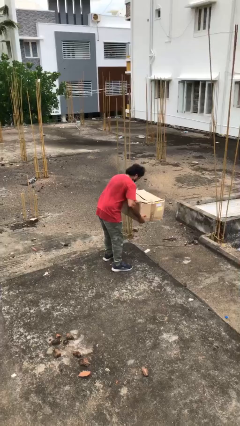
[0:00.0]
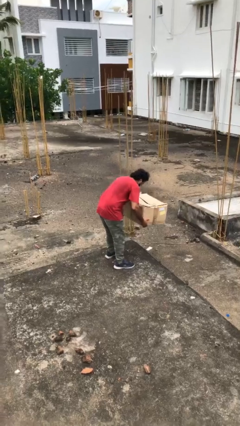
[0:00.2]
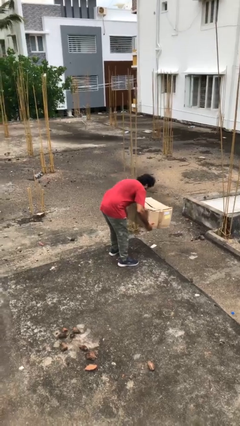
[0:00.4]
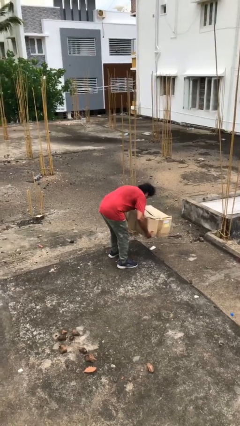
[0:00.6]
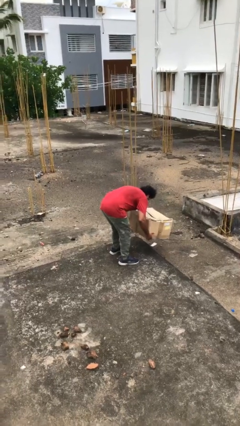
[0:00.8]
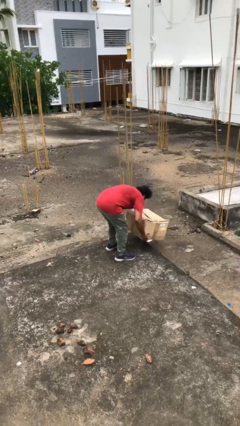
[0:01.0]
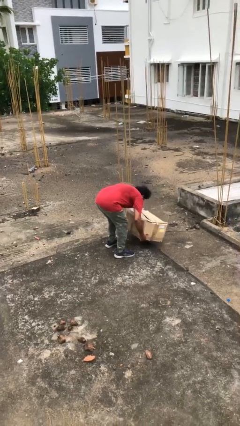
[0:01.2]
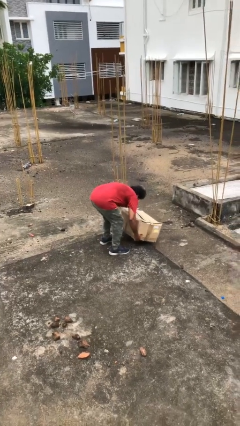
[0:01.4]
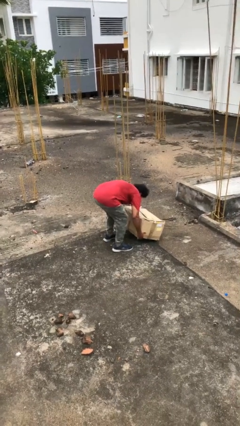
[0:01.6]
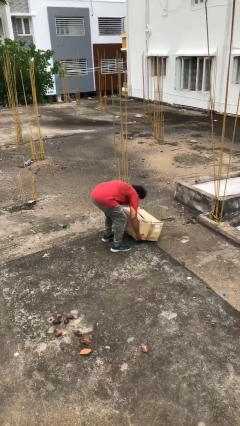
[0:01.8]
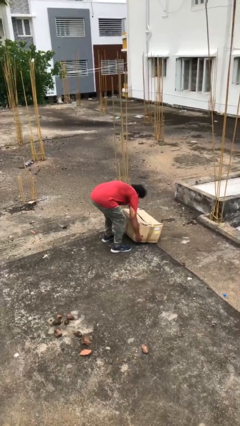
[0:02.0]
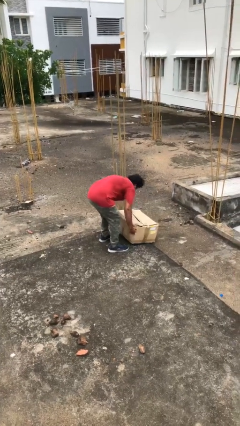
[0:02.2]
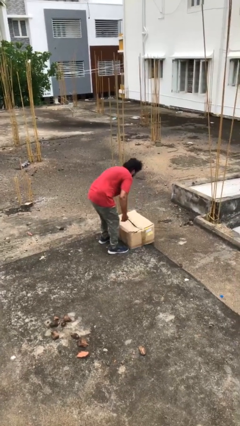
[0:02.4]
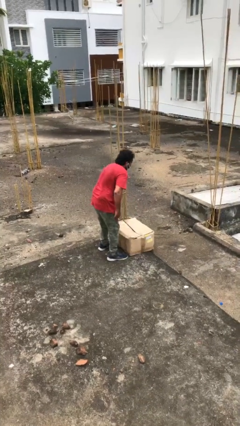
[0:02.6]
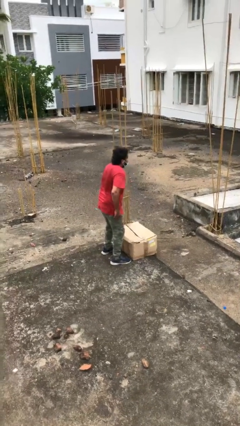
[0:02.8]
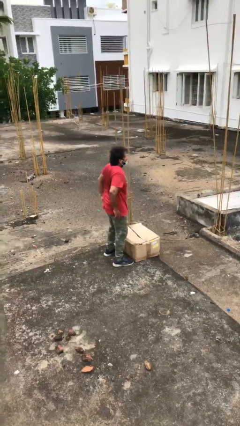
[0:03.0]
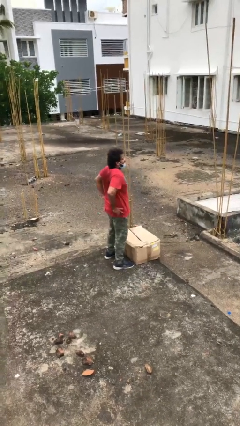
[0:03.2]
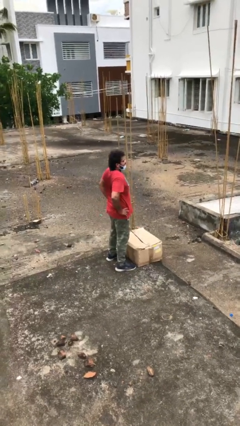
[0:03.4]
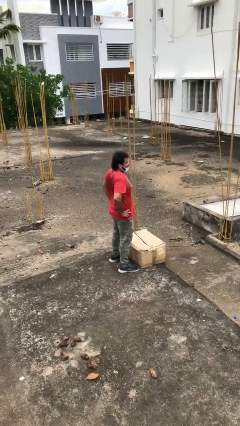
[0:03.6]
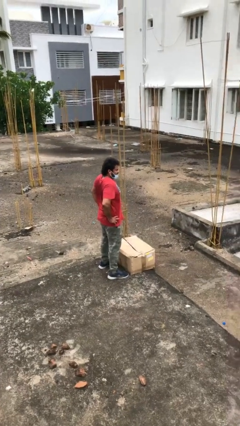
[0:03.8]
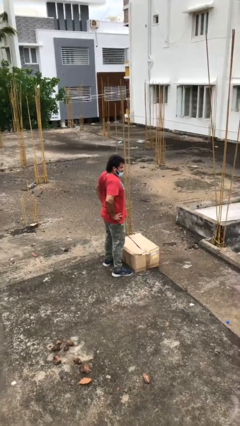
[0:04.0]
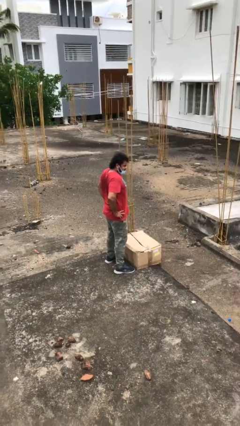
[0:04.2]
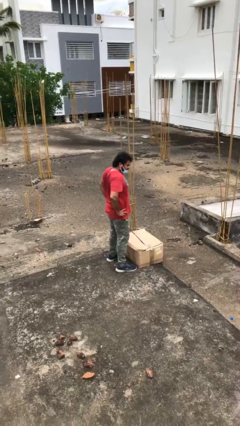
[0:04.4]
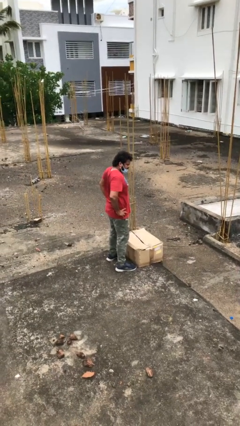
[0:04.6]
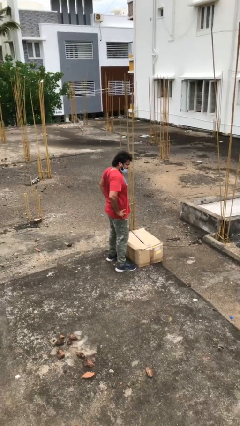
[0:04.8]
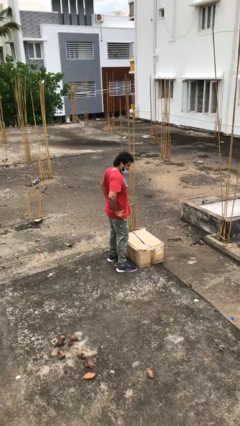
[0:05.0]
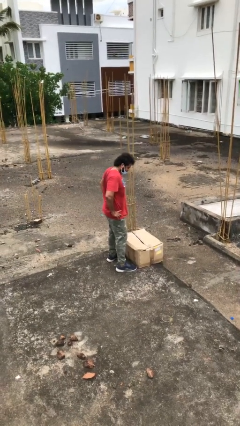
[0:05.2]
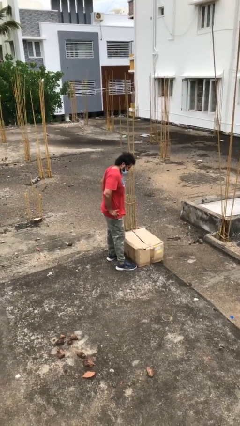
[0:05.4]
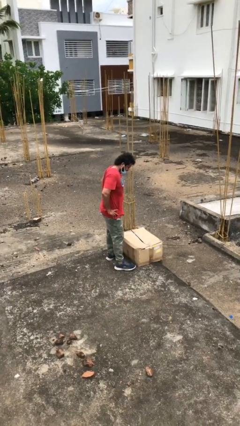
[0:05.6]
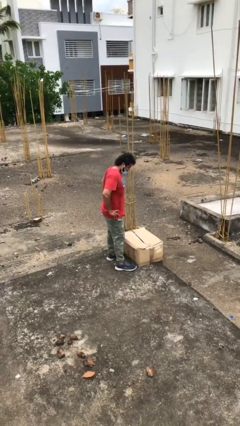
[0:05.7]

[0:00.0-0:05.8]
person puts down object on floor

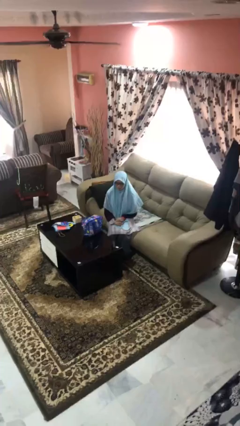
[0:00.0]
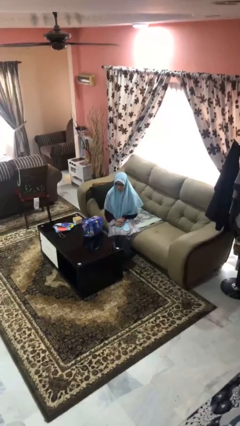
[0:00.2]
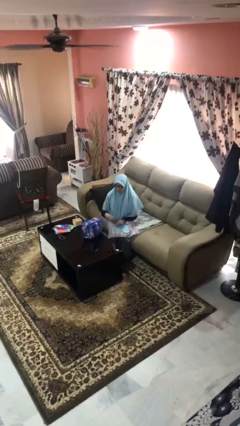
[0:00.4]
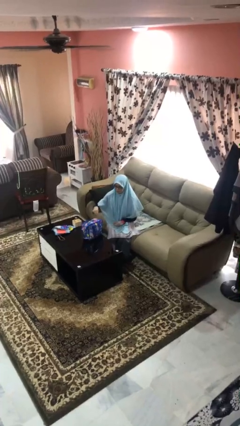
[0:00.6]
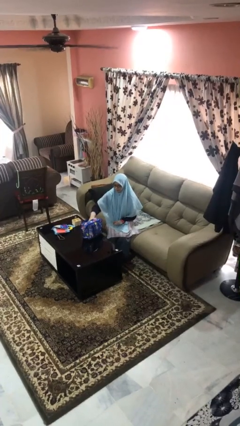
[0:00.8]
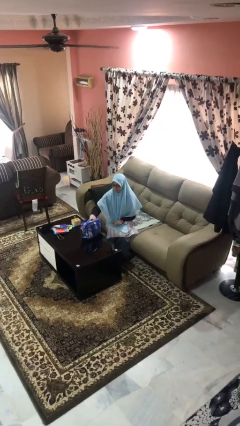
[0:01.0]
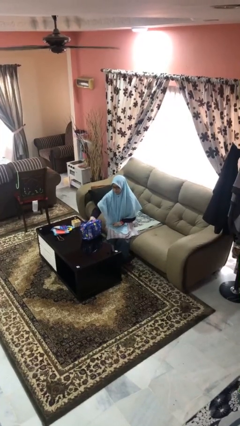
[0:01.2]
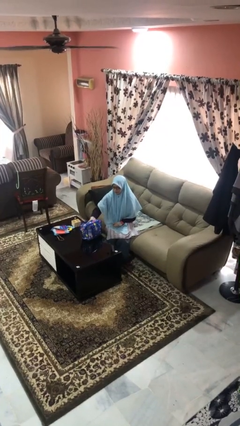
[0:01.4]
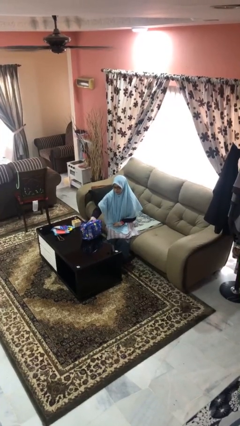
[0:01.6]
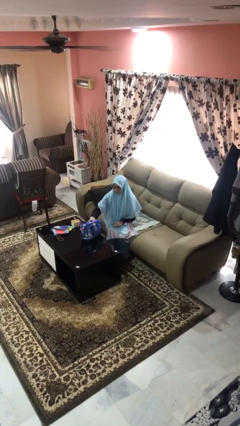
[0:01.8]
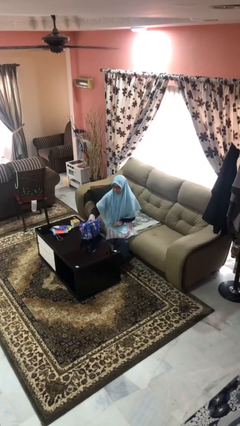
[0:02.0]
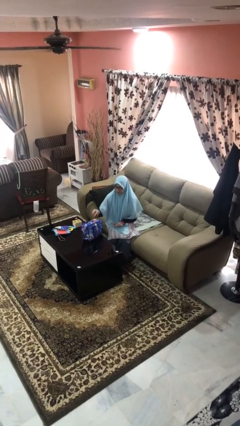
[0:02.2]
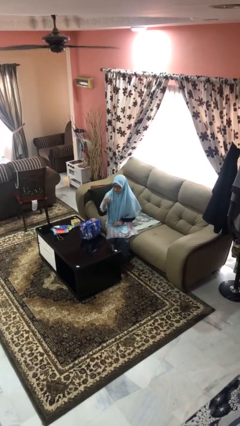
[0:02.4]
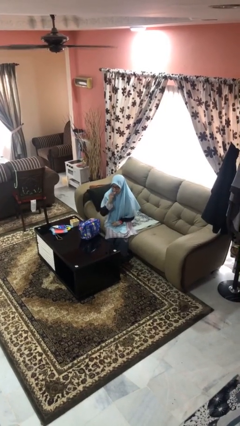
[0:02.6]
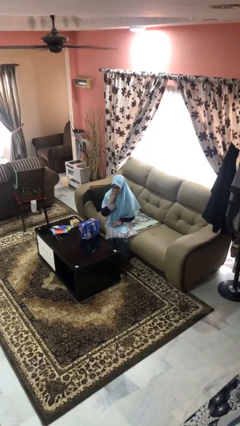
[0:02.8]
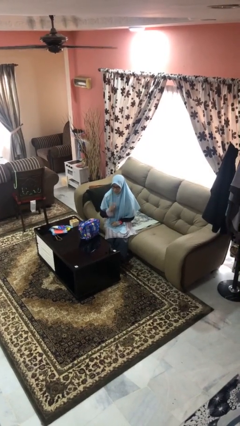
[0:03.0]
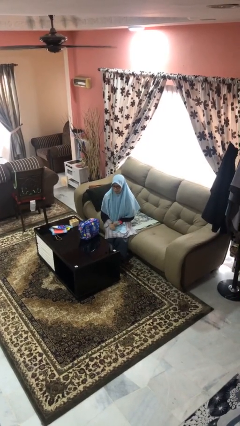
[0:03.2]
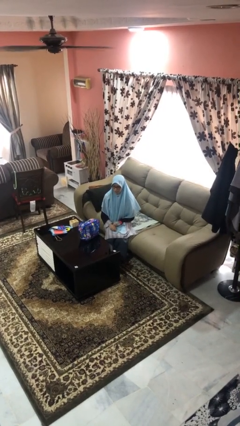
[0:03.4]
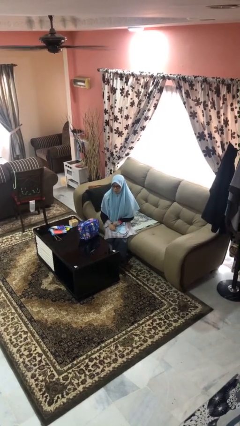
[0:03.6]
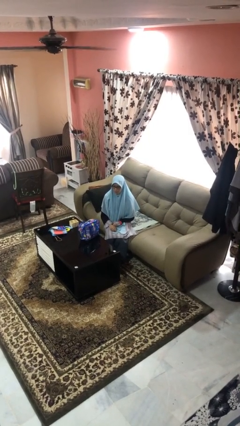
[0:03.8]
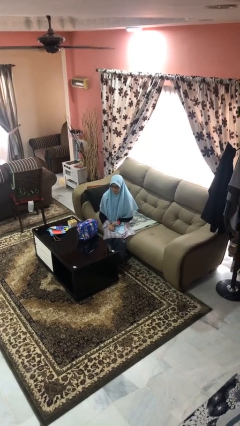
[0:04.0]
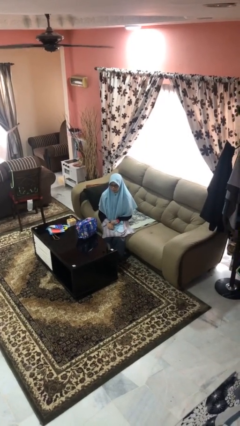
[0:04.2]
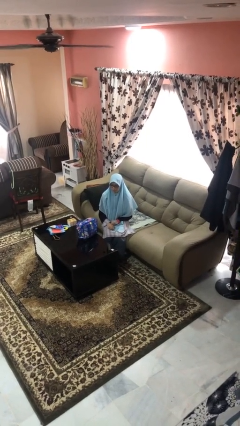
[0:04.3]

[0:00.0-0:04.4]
person eats snack from bag

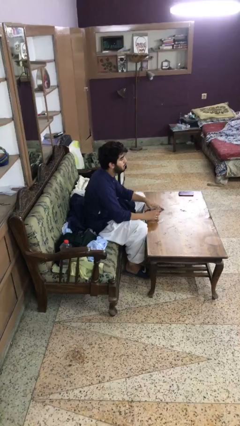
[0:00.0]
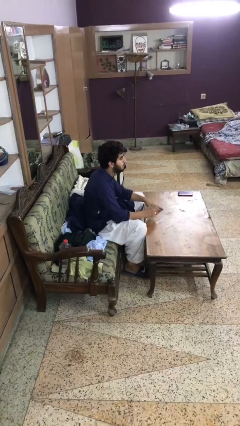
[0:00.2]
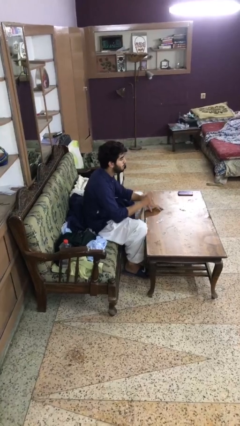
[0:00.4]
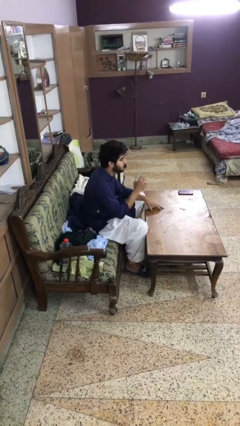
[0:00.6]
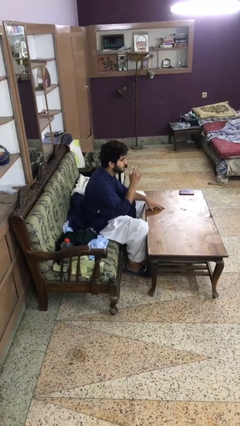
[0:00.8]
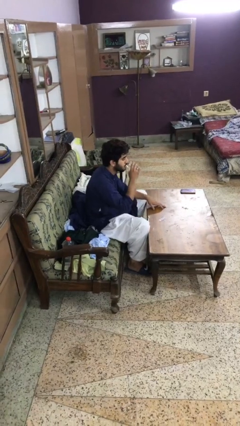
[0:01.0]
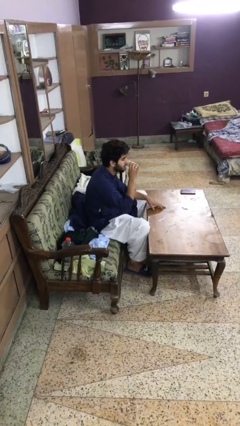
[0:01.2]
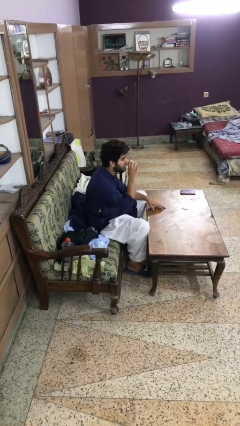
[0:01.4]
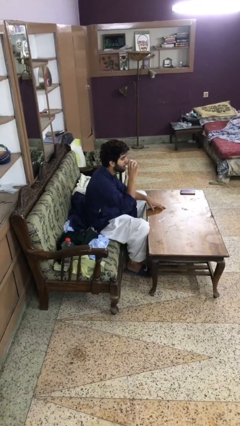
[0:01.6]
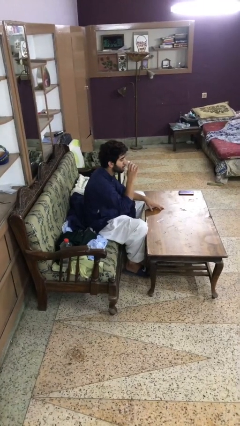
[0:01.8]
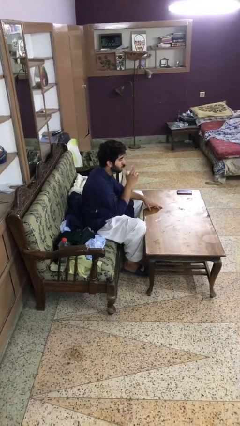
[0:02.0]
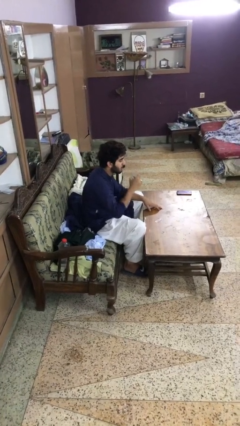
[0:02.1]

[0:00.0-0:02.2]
person drinks from cup

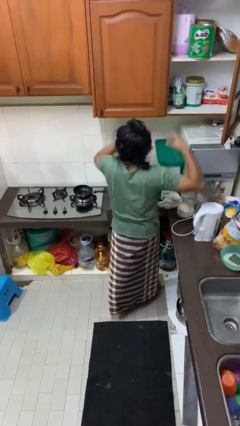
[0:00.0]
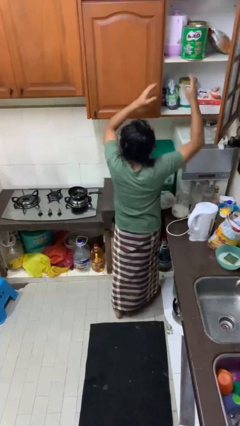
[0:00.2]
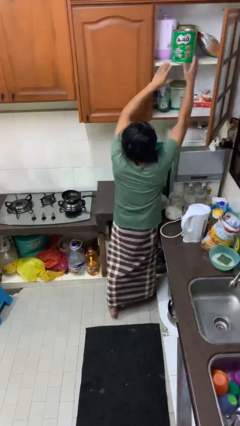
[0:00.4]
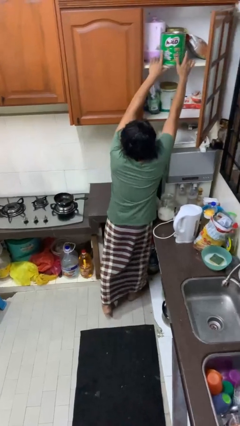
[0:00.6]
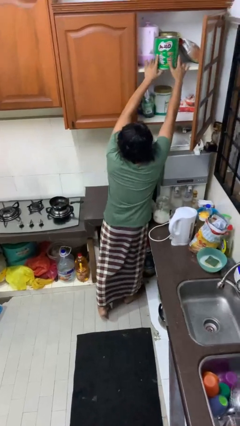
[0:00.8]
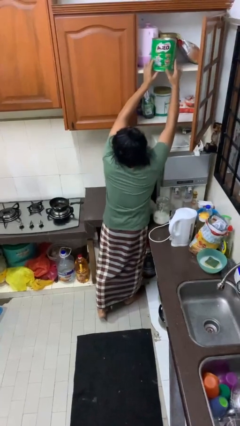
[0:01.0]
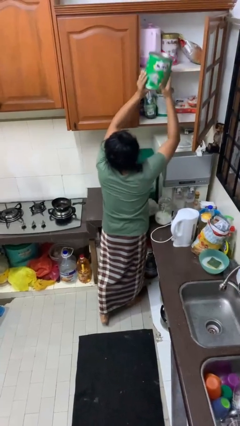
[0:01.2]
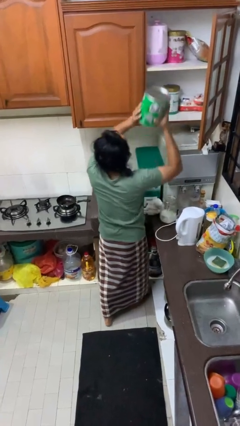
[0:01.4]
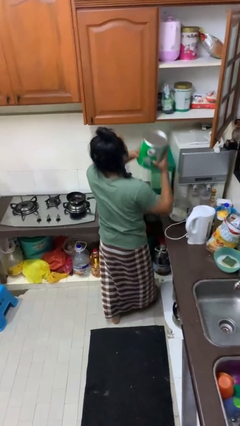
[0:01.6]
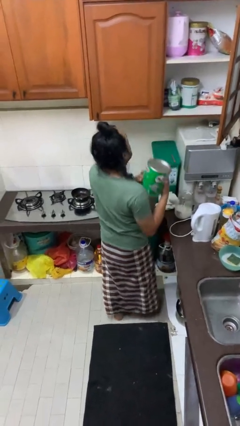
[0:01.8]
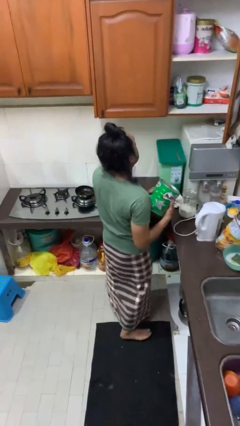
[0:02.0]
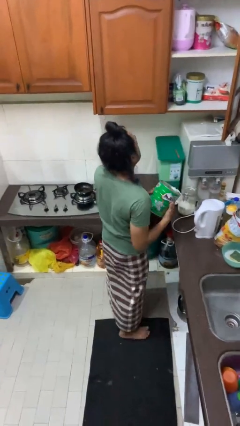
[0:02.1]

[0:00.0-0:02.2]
person takes object from cabinet

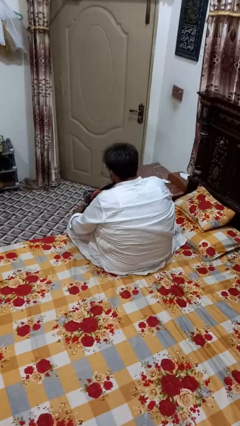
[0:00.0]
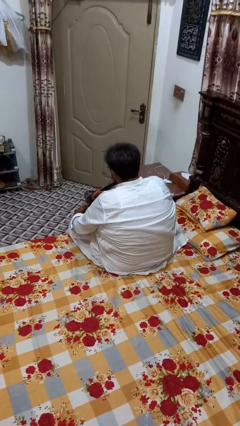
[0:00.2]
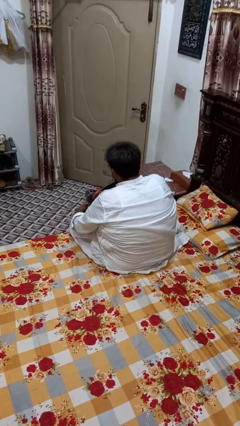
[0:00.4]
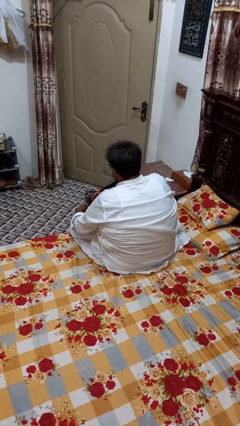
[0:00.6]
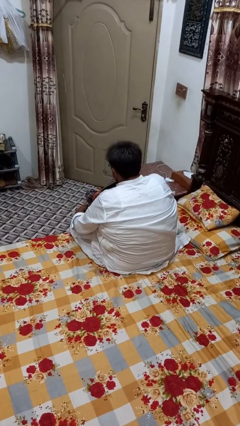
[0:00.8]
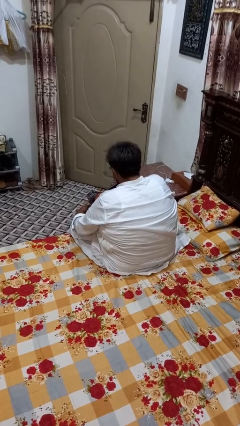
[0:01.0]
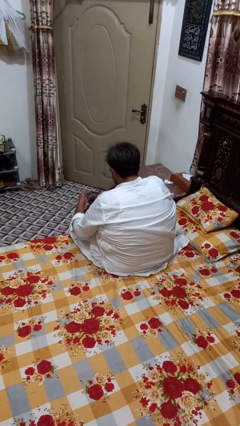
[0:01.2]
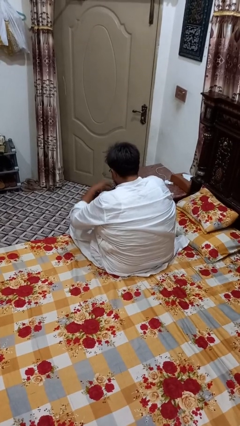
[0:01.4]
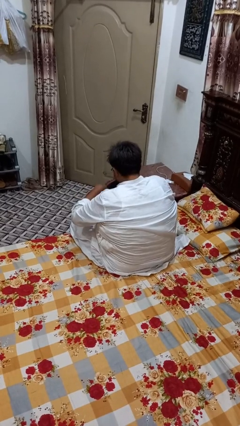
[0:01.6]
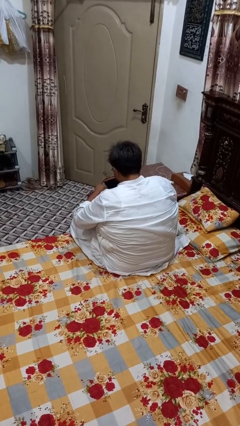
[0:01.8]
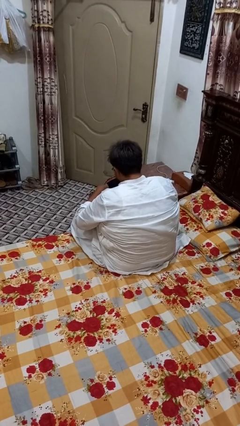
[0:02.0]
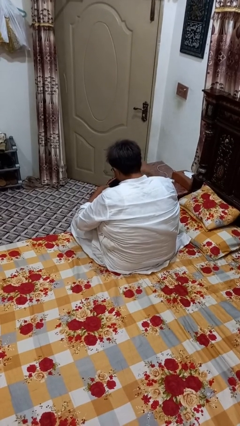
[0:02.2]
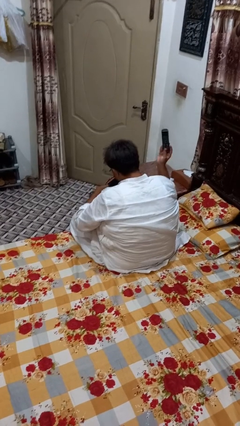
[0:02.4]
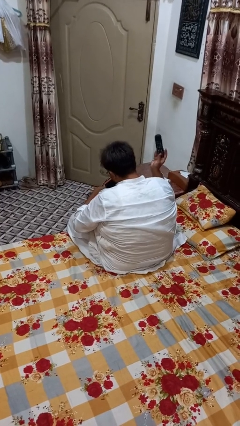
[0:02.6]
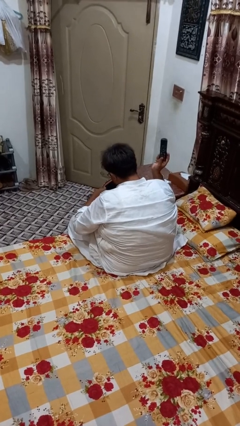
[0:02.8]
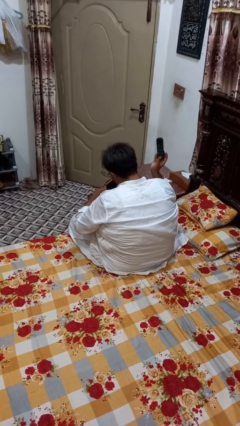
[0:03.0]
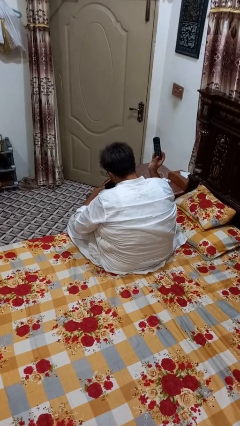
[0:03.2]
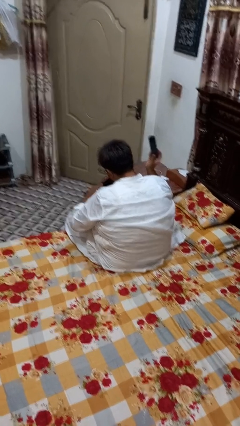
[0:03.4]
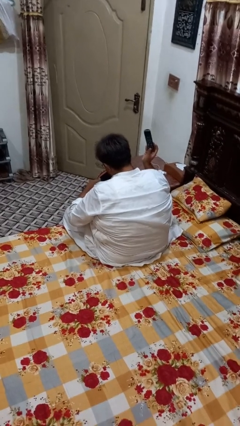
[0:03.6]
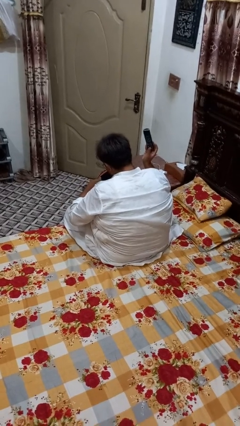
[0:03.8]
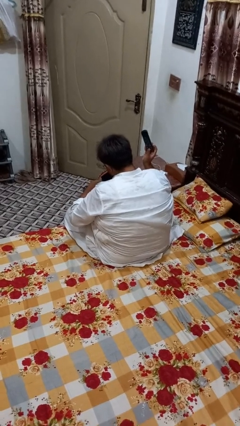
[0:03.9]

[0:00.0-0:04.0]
person takes object from bag
